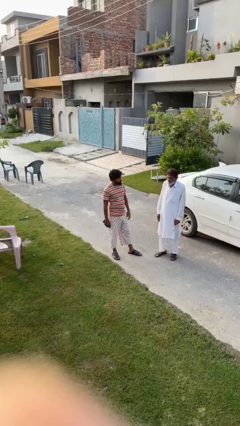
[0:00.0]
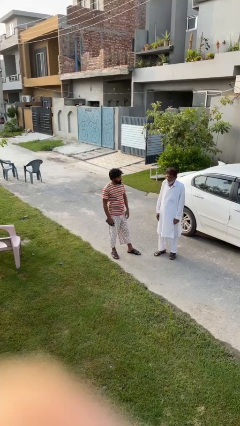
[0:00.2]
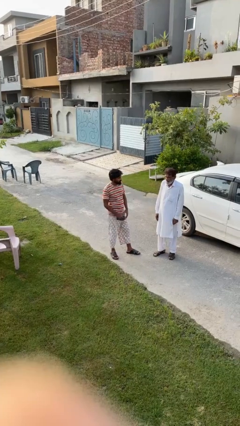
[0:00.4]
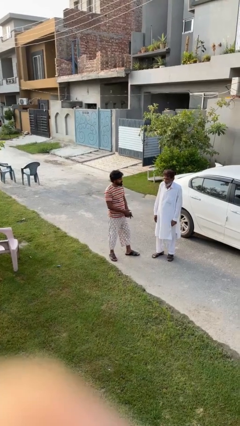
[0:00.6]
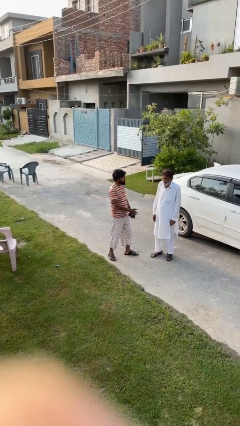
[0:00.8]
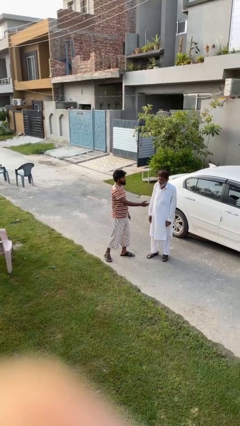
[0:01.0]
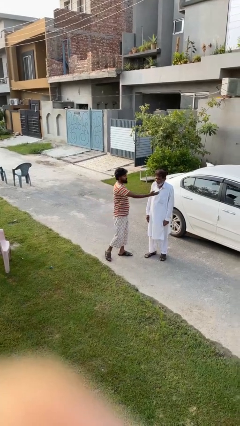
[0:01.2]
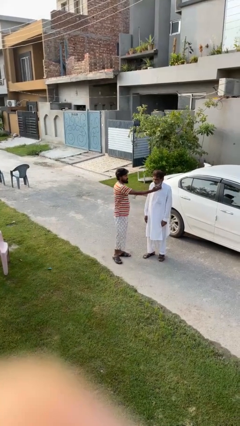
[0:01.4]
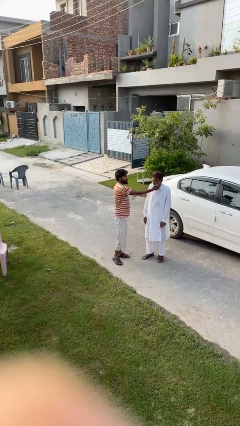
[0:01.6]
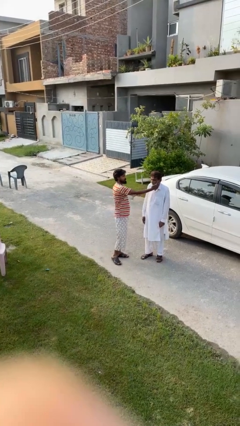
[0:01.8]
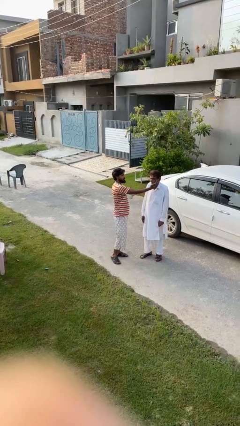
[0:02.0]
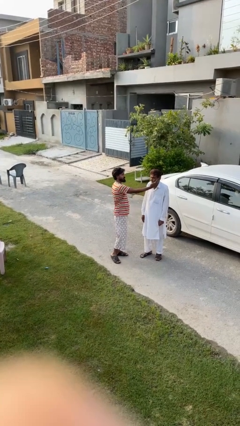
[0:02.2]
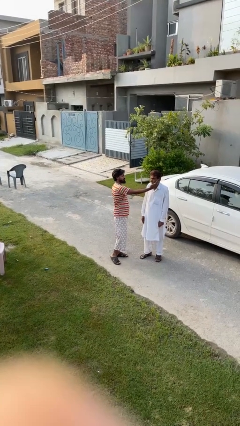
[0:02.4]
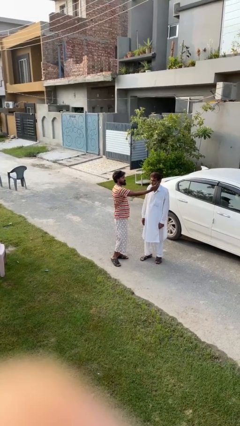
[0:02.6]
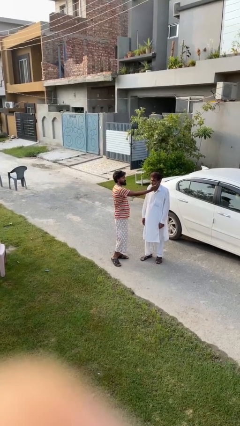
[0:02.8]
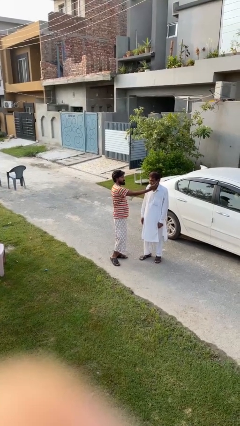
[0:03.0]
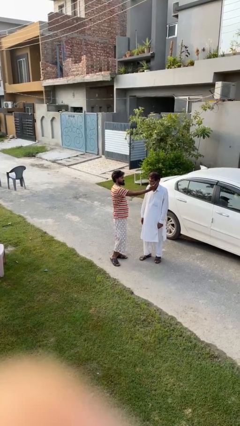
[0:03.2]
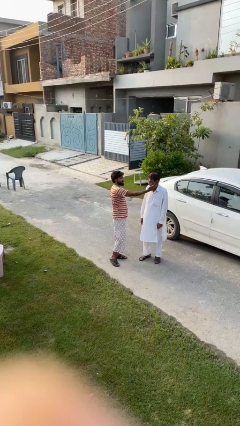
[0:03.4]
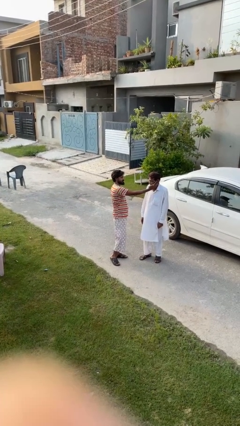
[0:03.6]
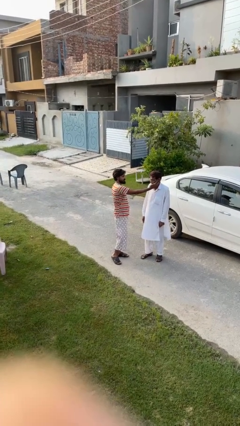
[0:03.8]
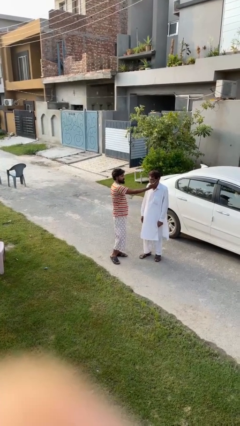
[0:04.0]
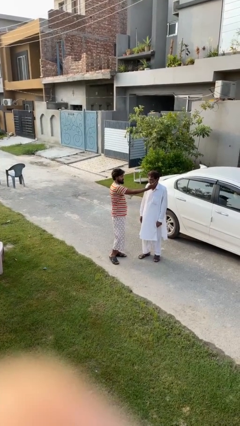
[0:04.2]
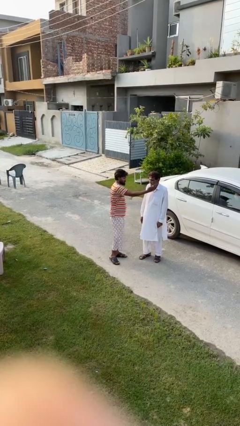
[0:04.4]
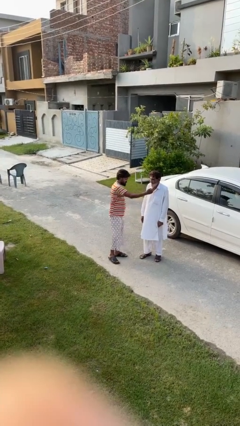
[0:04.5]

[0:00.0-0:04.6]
person touches face of person

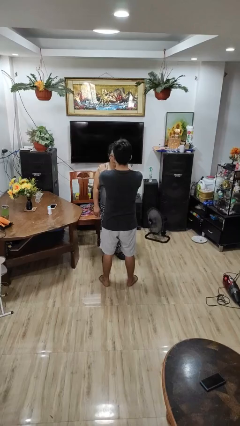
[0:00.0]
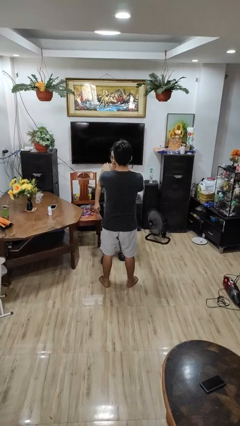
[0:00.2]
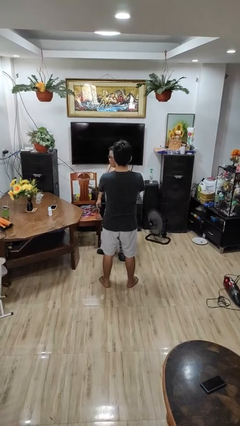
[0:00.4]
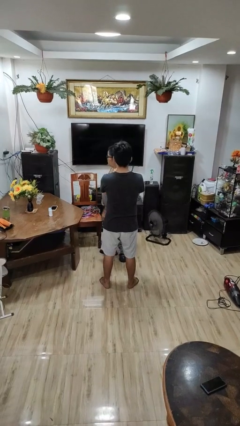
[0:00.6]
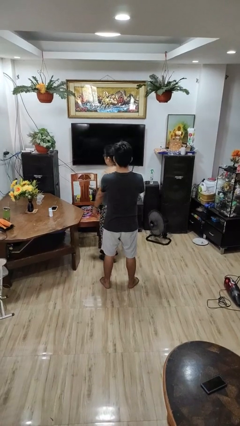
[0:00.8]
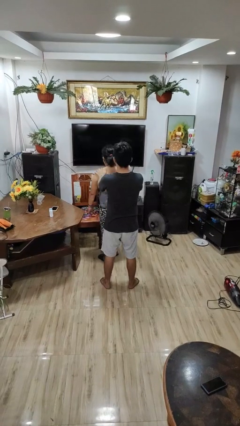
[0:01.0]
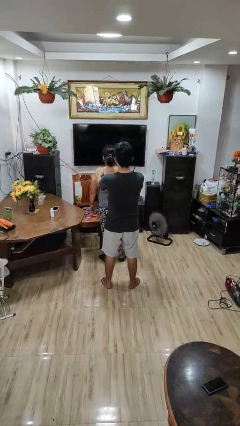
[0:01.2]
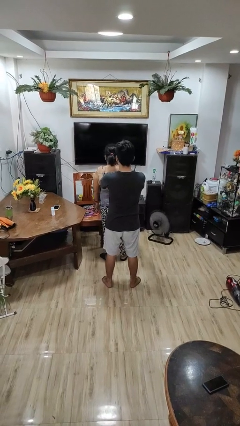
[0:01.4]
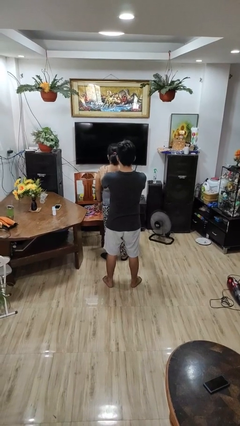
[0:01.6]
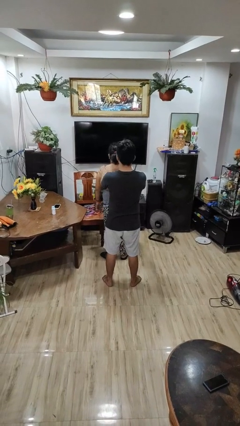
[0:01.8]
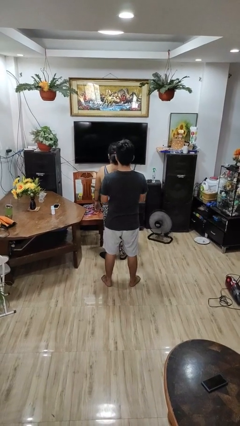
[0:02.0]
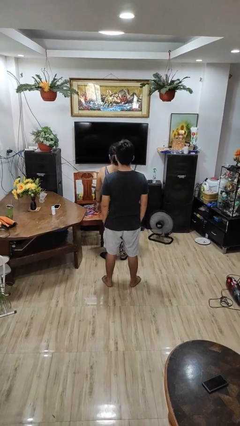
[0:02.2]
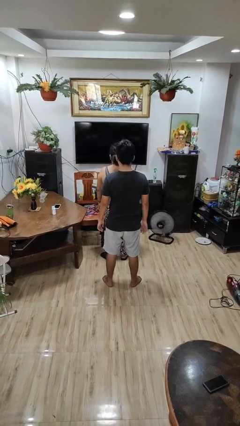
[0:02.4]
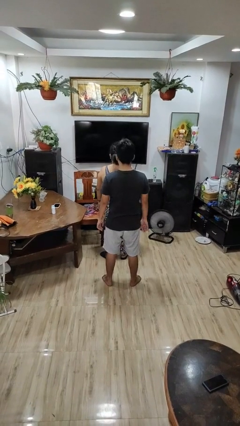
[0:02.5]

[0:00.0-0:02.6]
person spins person around

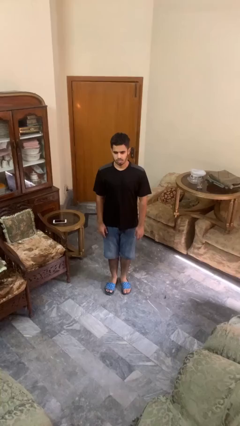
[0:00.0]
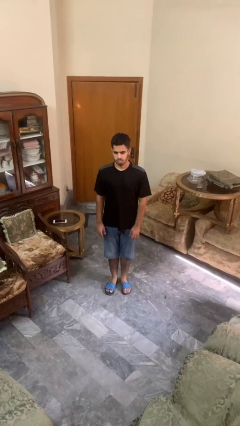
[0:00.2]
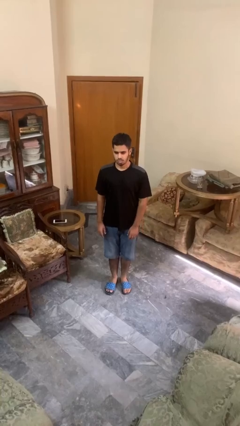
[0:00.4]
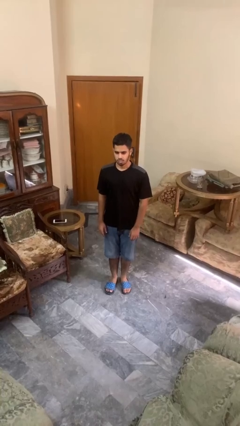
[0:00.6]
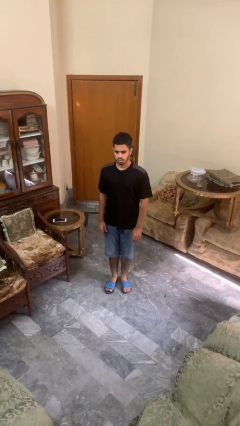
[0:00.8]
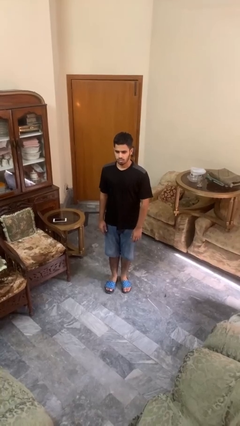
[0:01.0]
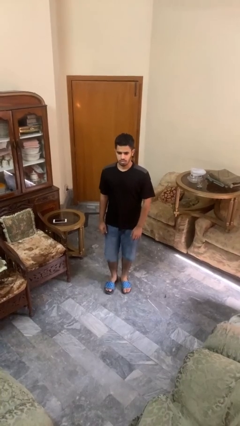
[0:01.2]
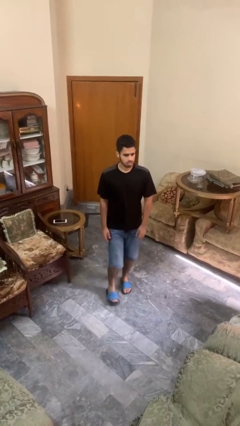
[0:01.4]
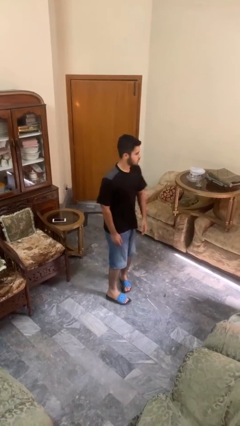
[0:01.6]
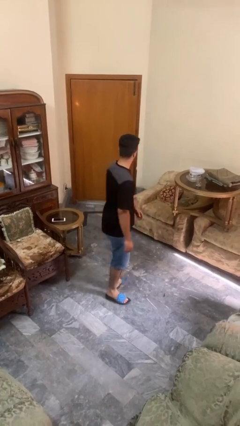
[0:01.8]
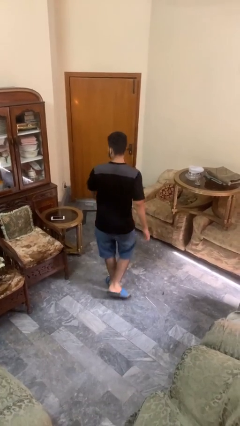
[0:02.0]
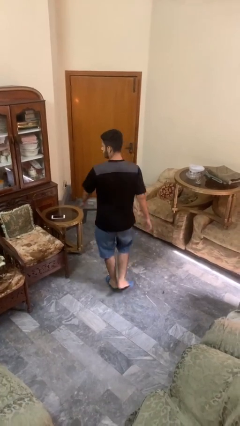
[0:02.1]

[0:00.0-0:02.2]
person twirls

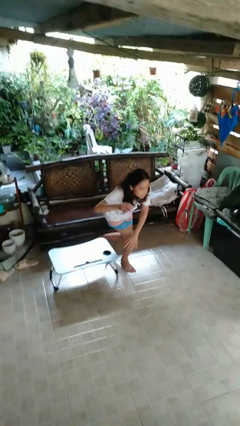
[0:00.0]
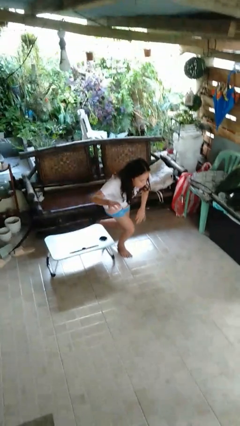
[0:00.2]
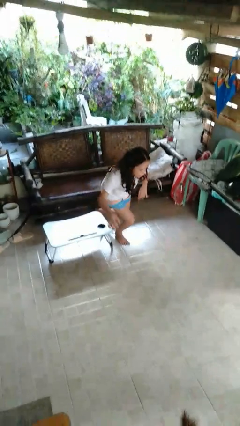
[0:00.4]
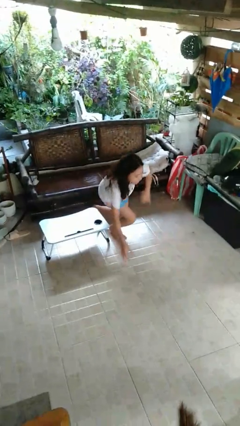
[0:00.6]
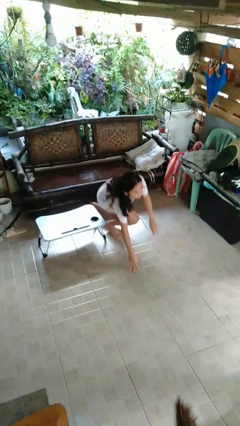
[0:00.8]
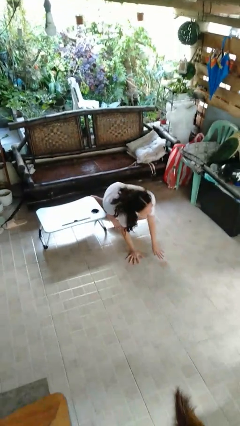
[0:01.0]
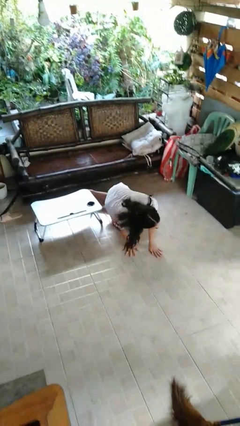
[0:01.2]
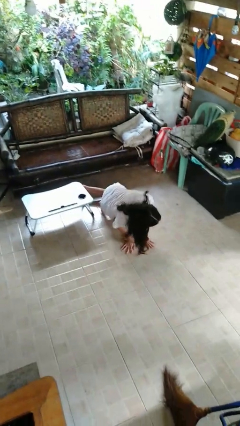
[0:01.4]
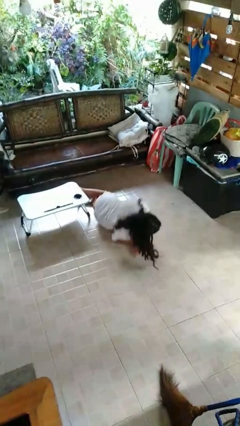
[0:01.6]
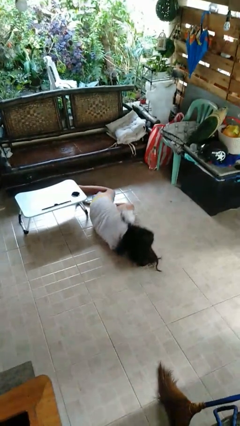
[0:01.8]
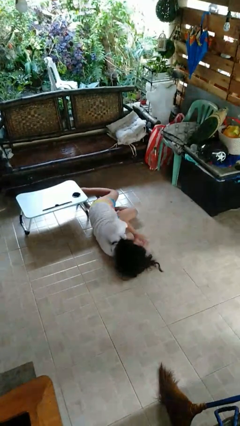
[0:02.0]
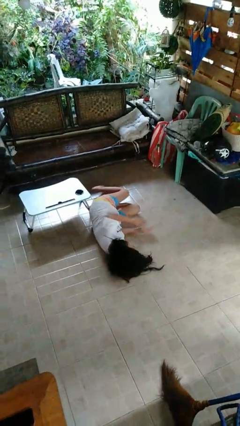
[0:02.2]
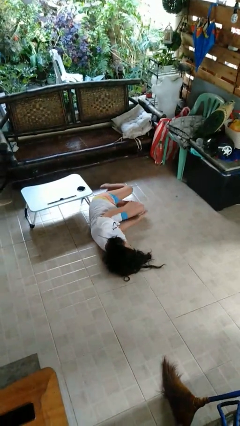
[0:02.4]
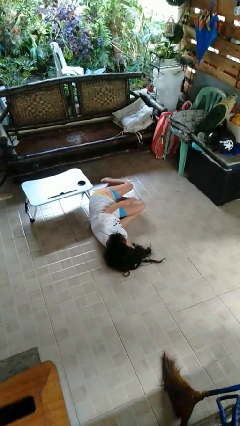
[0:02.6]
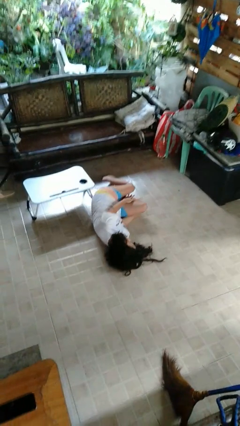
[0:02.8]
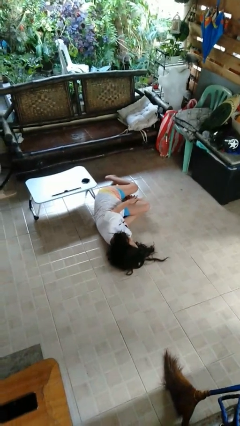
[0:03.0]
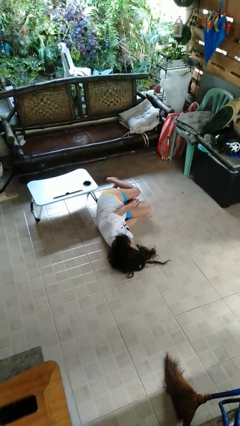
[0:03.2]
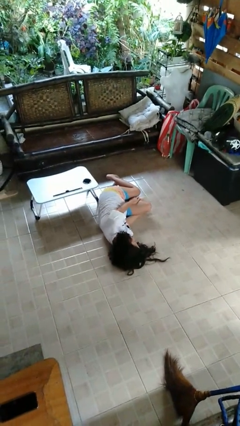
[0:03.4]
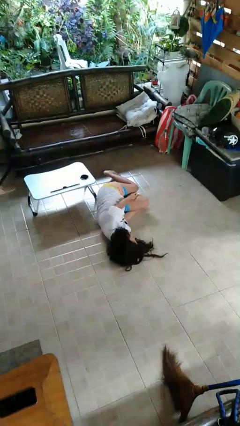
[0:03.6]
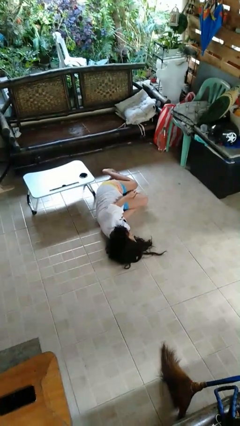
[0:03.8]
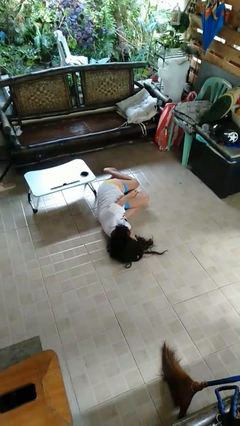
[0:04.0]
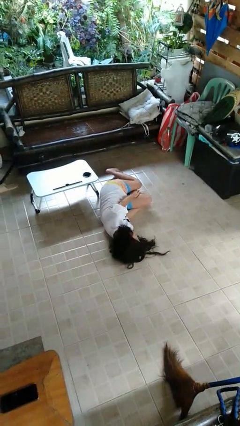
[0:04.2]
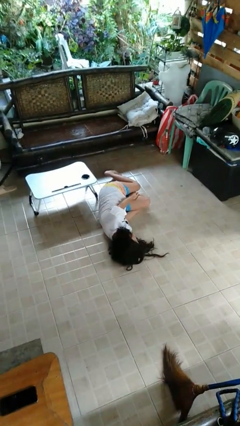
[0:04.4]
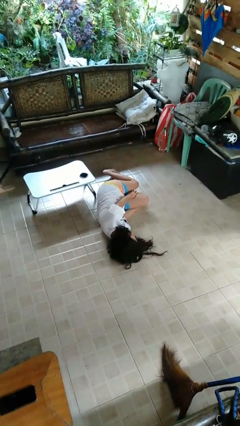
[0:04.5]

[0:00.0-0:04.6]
person lies down on floor

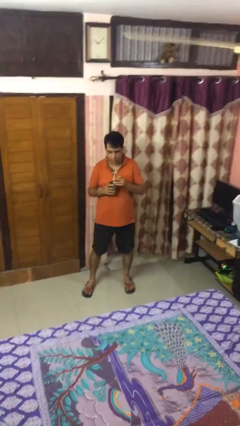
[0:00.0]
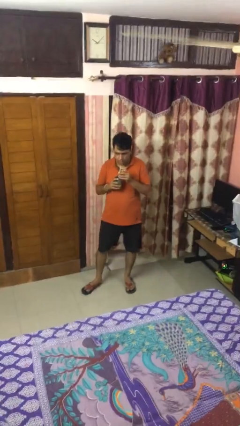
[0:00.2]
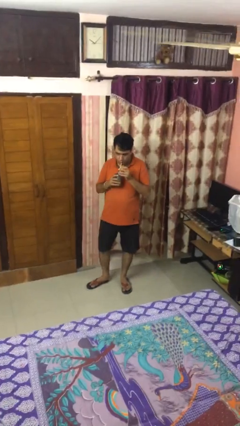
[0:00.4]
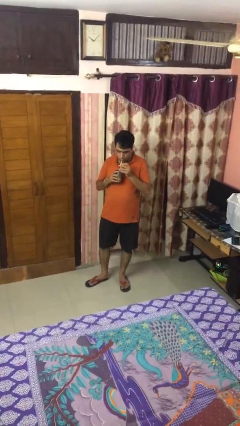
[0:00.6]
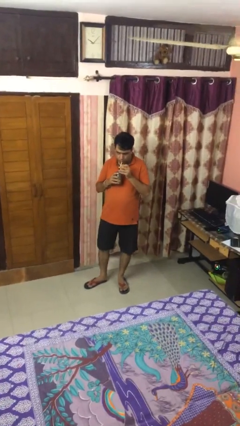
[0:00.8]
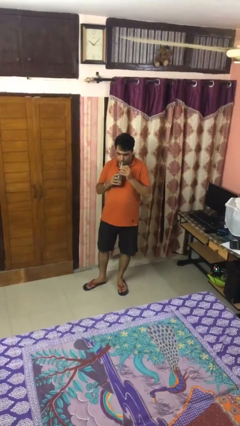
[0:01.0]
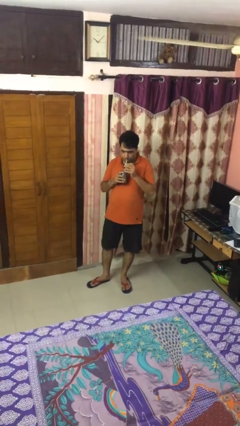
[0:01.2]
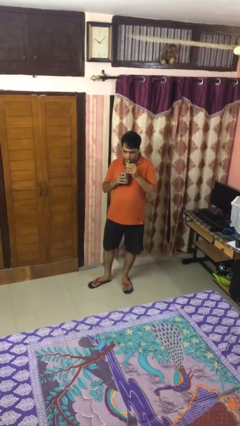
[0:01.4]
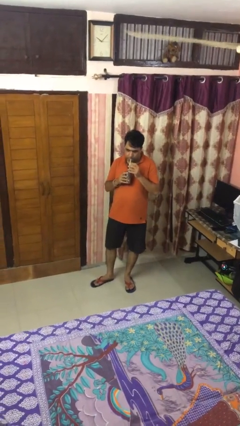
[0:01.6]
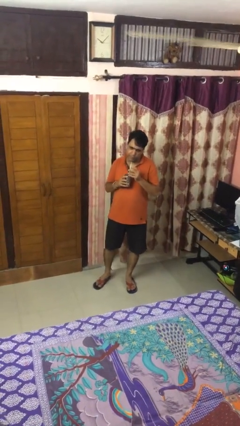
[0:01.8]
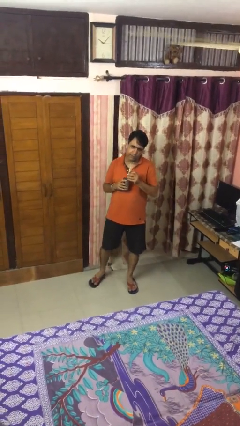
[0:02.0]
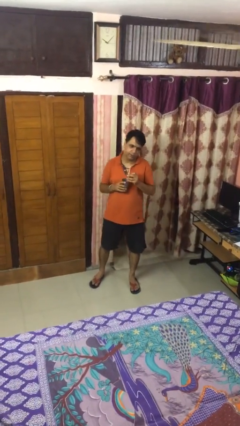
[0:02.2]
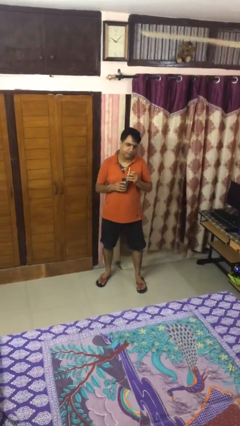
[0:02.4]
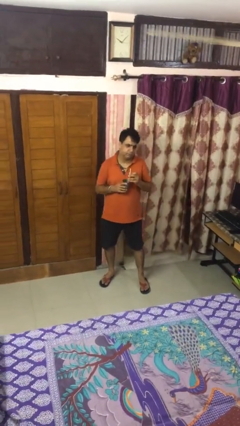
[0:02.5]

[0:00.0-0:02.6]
person drinks from straw

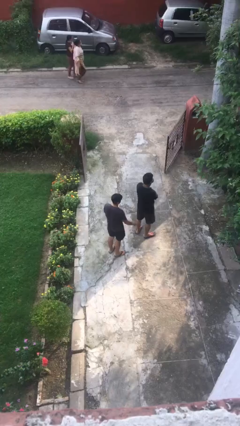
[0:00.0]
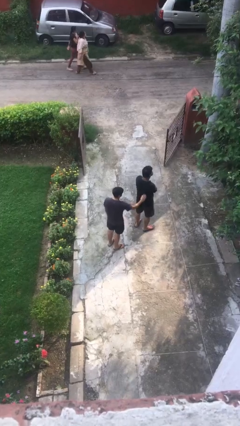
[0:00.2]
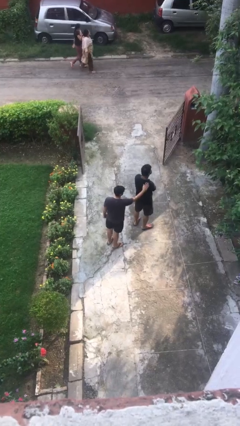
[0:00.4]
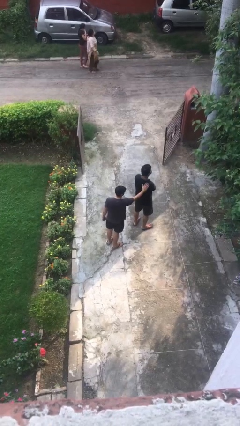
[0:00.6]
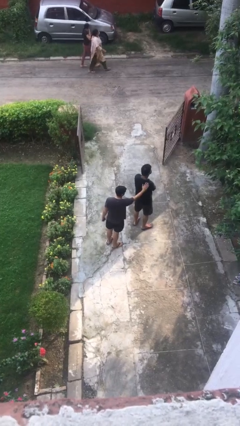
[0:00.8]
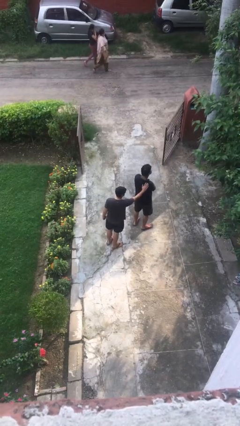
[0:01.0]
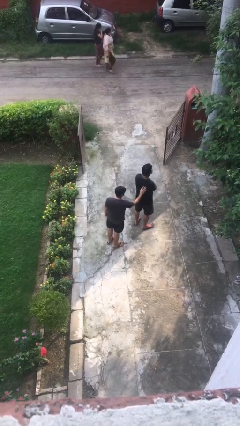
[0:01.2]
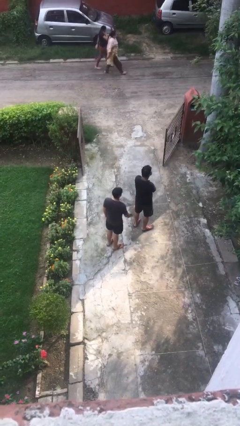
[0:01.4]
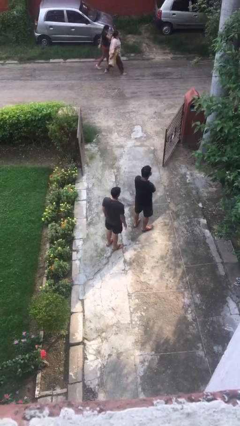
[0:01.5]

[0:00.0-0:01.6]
person touches back of person
